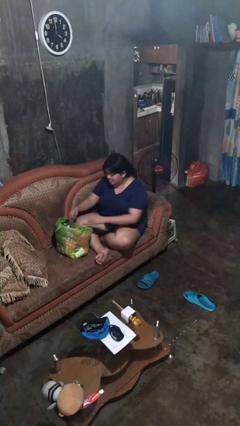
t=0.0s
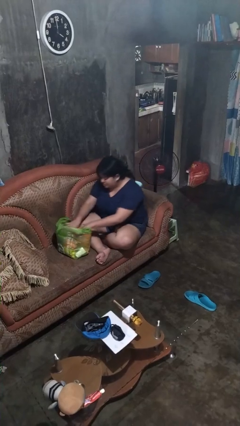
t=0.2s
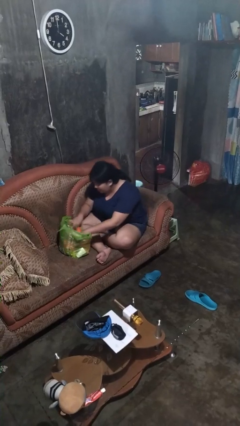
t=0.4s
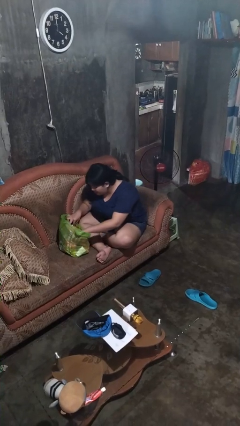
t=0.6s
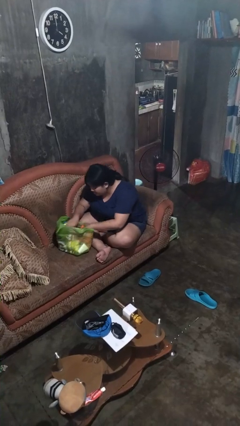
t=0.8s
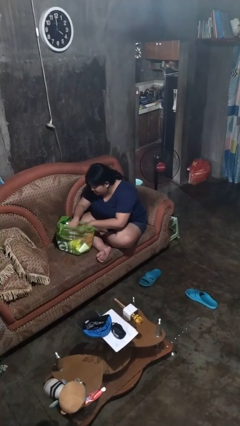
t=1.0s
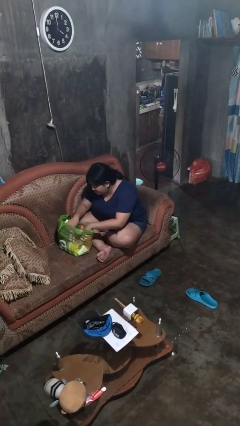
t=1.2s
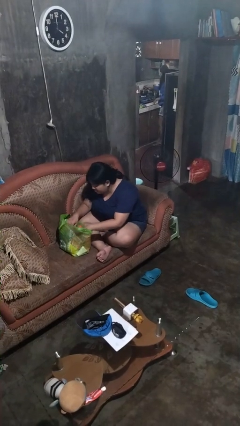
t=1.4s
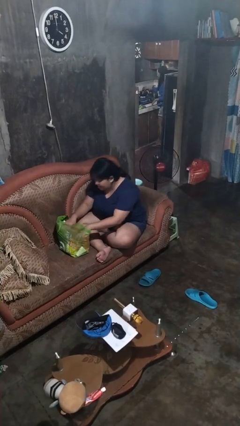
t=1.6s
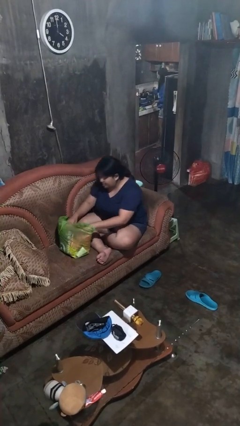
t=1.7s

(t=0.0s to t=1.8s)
person searches in bag

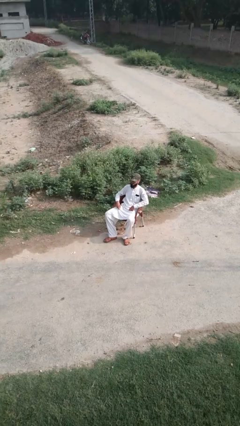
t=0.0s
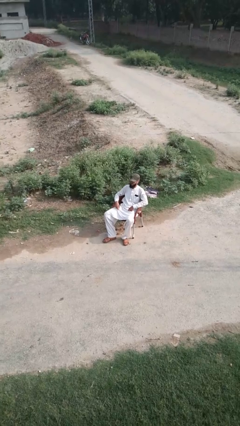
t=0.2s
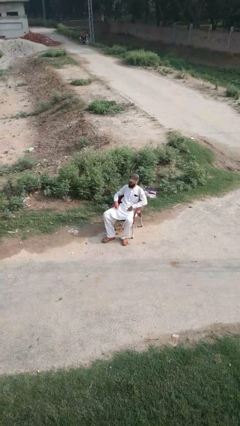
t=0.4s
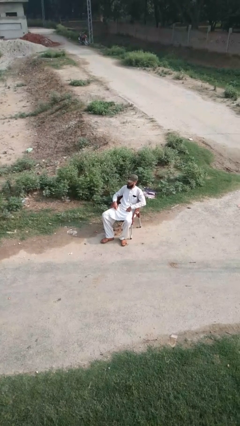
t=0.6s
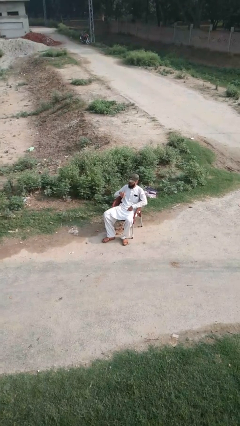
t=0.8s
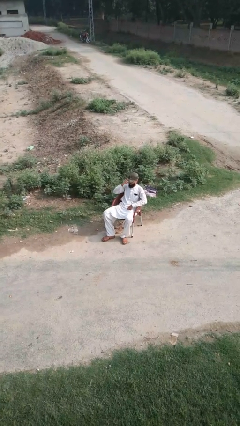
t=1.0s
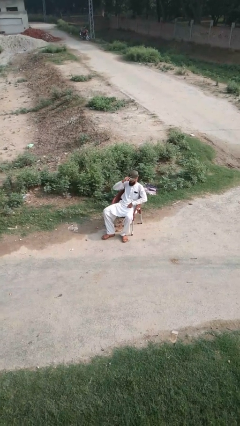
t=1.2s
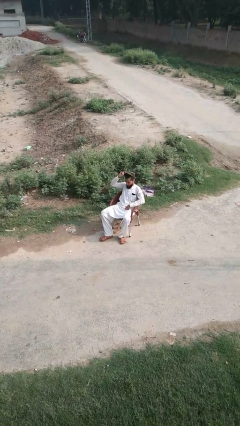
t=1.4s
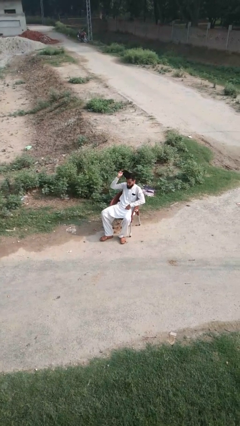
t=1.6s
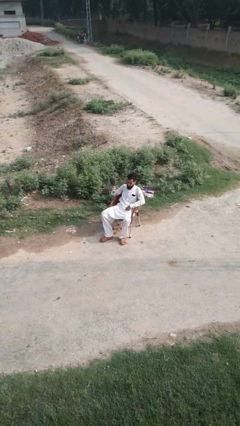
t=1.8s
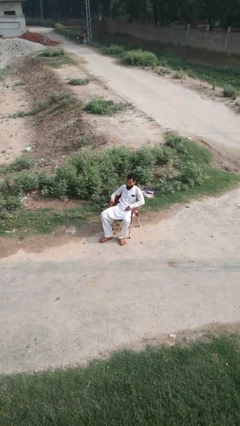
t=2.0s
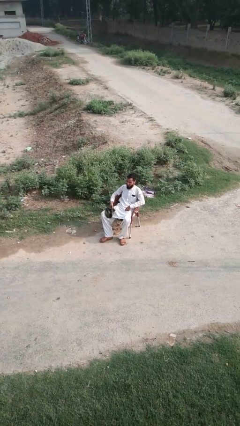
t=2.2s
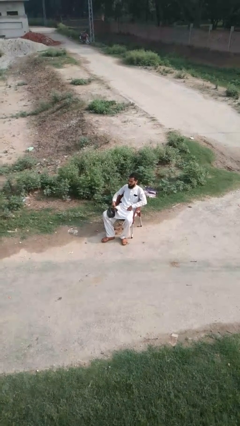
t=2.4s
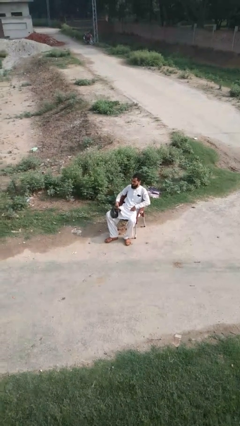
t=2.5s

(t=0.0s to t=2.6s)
person takes off hat

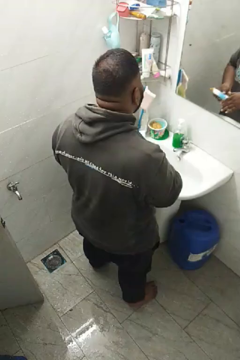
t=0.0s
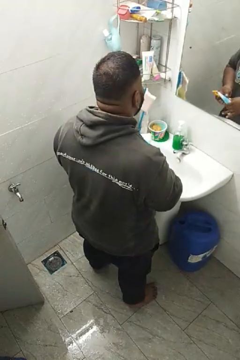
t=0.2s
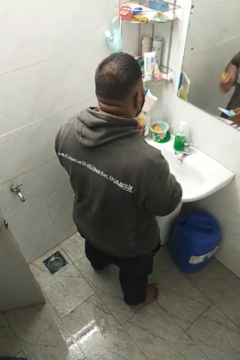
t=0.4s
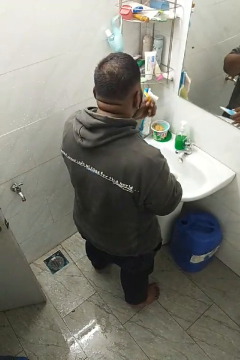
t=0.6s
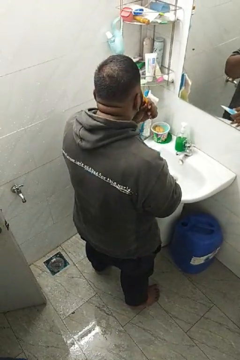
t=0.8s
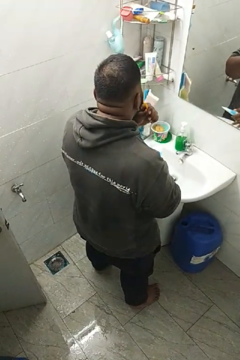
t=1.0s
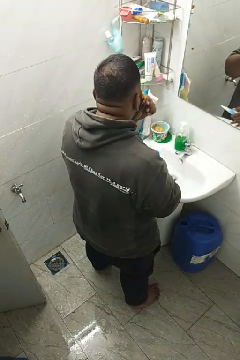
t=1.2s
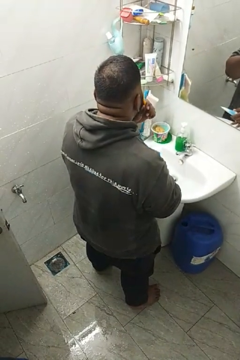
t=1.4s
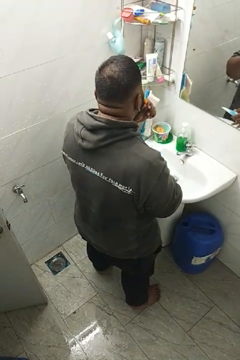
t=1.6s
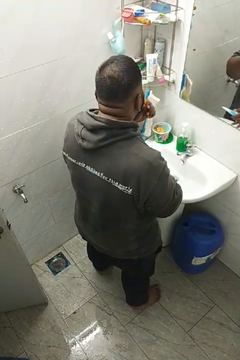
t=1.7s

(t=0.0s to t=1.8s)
person shaves face

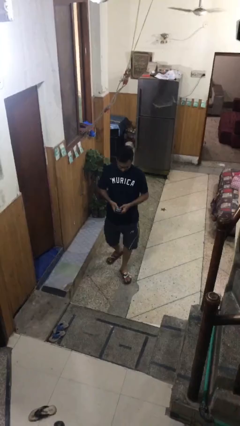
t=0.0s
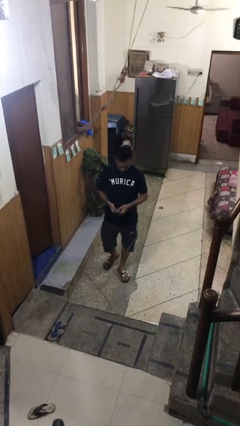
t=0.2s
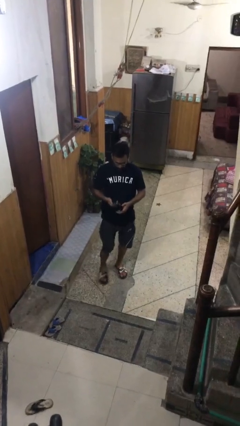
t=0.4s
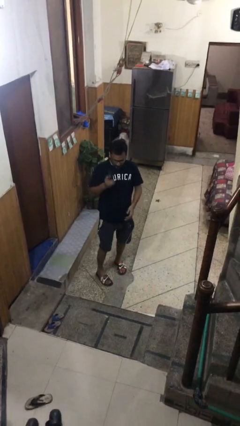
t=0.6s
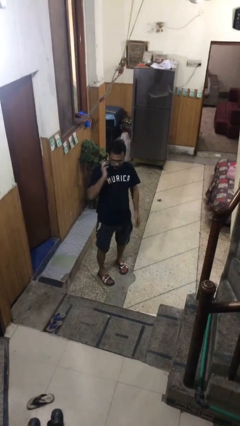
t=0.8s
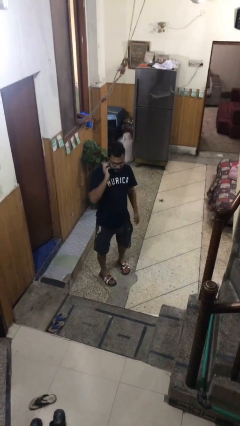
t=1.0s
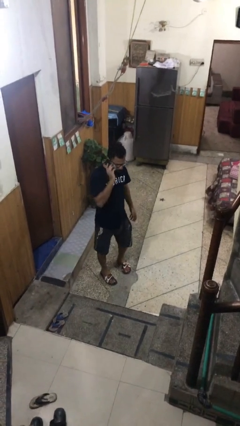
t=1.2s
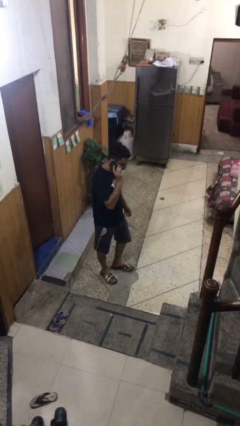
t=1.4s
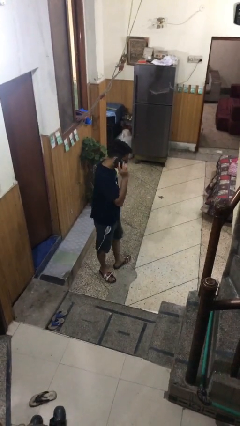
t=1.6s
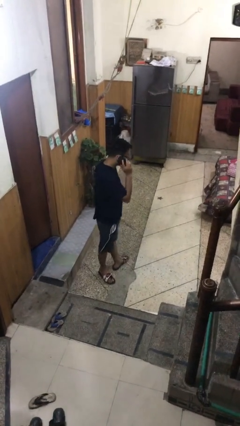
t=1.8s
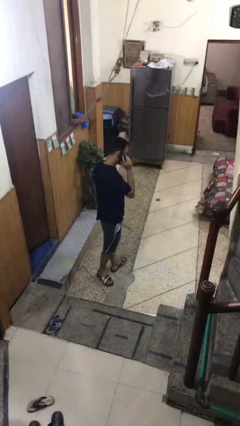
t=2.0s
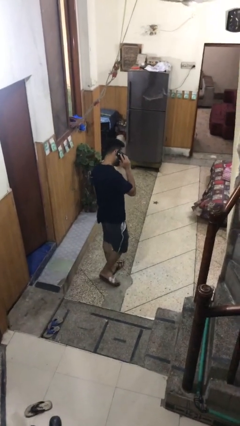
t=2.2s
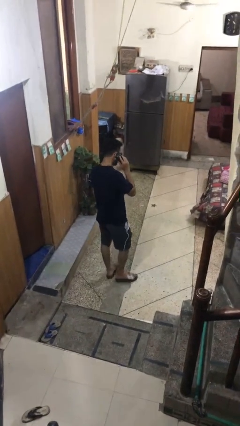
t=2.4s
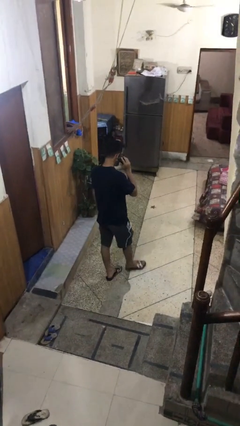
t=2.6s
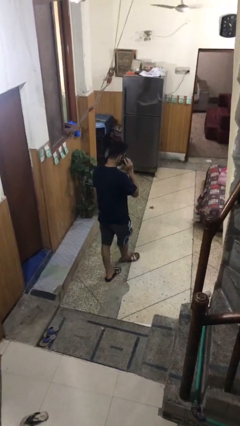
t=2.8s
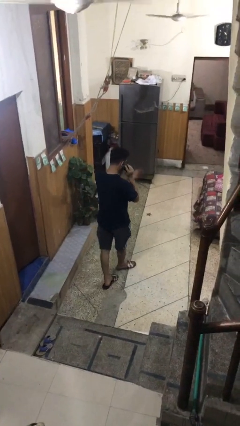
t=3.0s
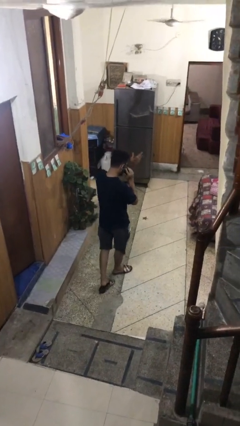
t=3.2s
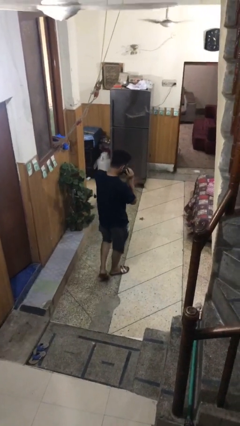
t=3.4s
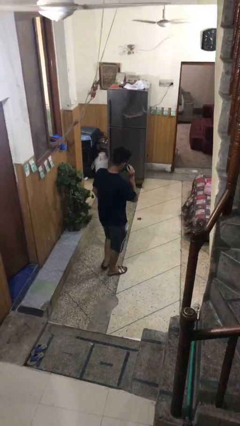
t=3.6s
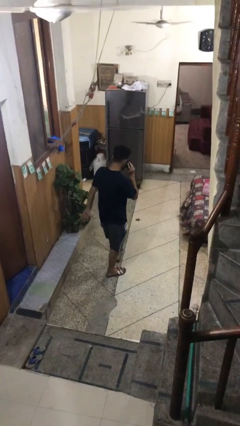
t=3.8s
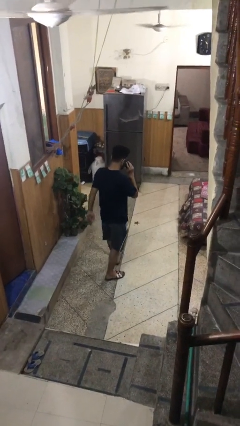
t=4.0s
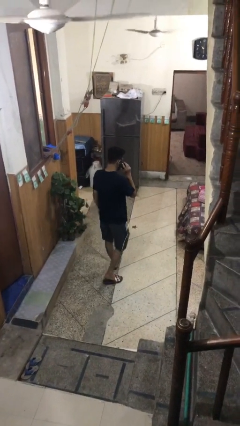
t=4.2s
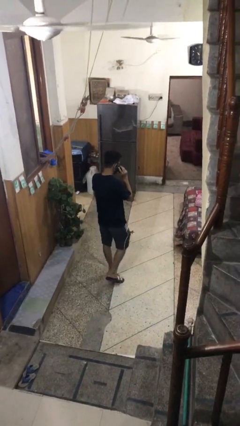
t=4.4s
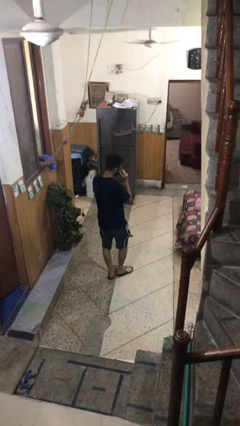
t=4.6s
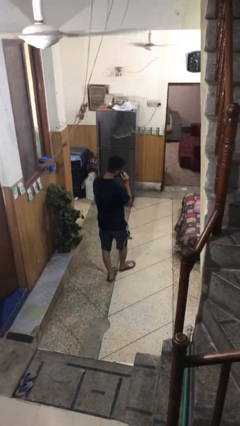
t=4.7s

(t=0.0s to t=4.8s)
person talks on phone

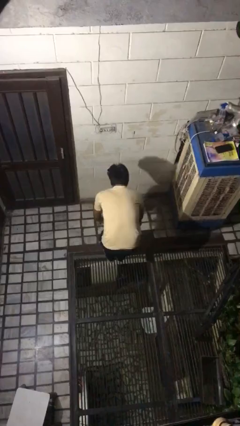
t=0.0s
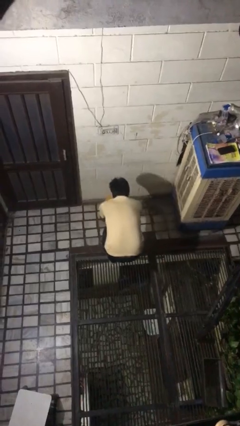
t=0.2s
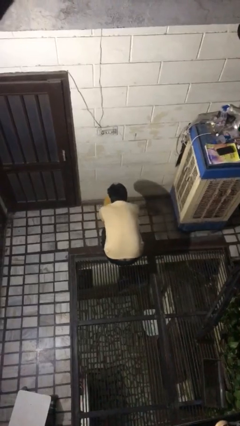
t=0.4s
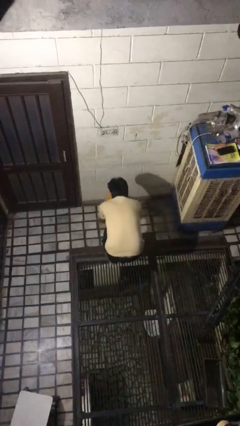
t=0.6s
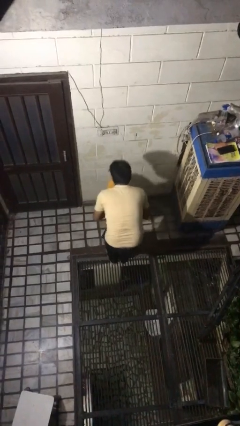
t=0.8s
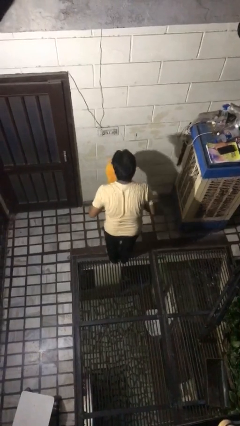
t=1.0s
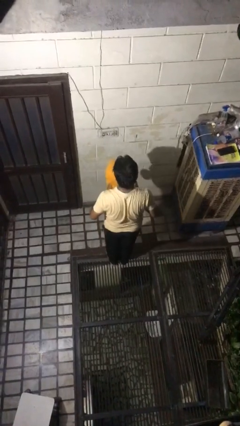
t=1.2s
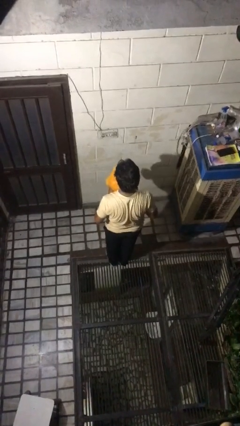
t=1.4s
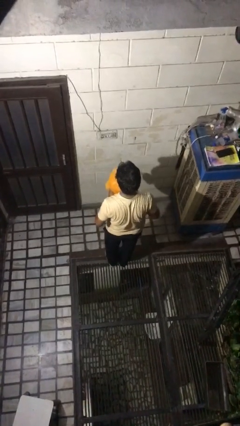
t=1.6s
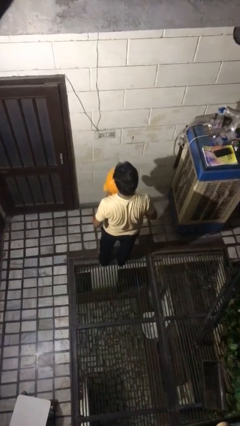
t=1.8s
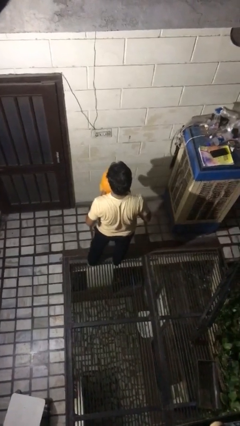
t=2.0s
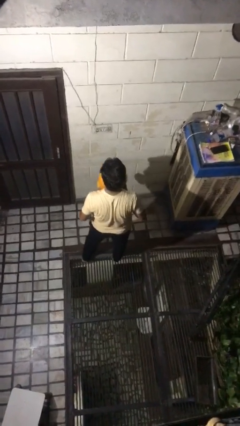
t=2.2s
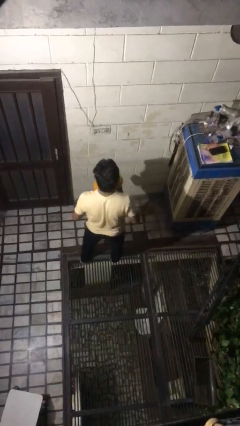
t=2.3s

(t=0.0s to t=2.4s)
person picks up object from floor

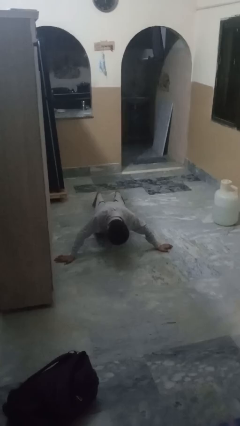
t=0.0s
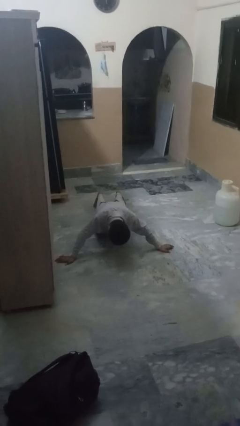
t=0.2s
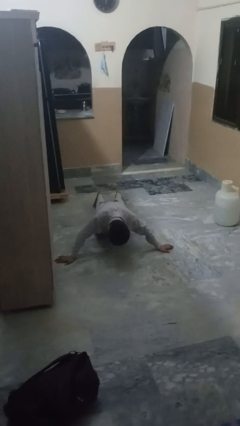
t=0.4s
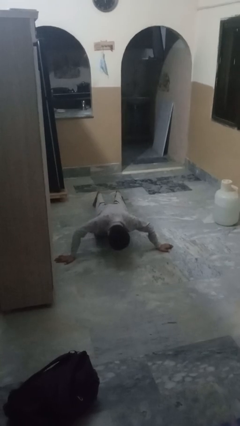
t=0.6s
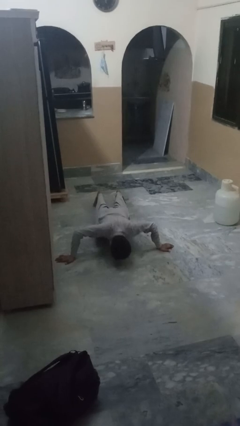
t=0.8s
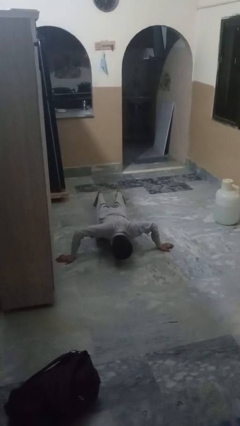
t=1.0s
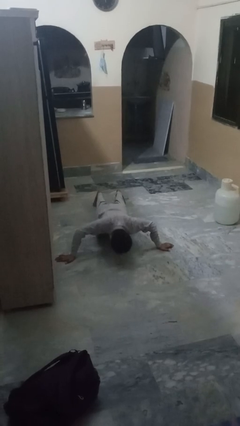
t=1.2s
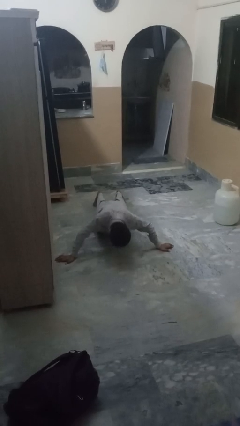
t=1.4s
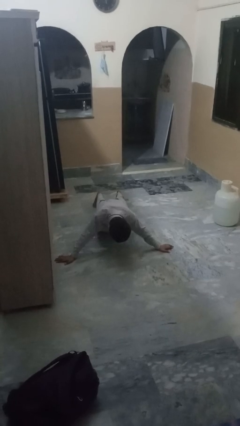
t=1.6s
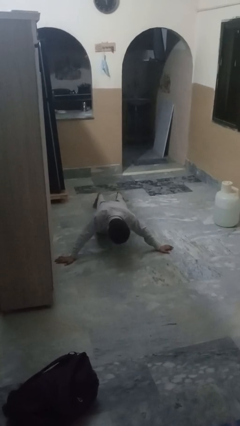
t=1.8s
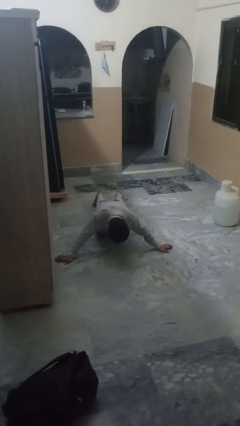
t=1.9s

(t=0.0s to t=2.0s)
person exercises with pushup

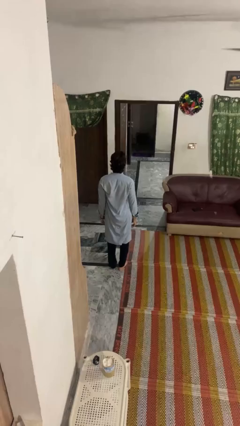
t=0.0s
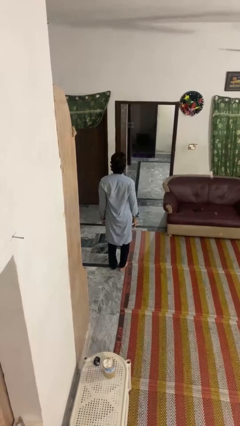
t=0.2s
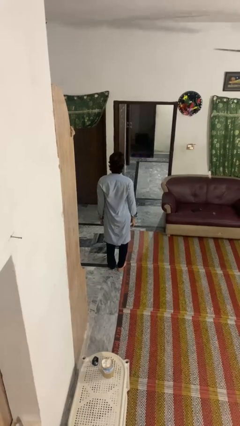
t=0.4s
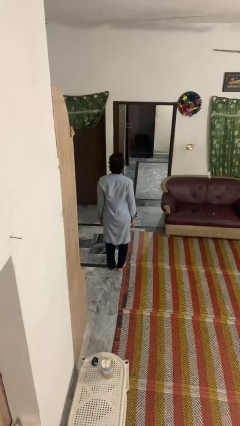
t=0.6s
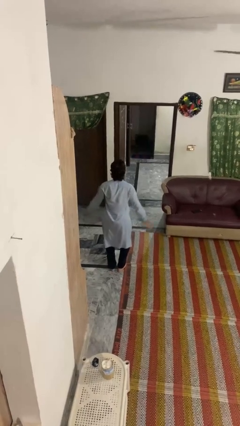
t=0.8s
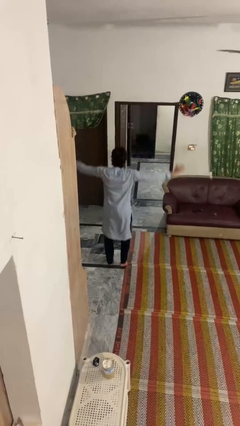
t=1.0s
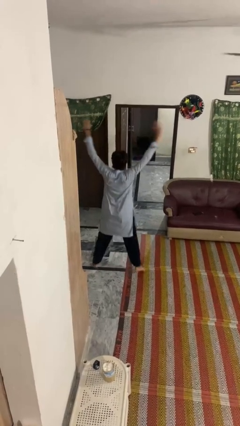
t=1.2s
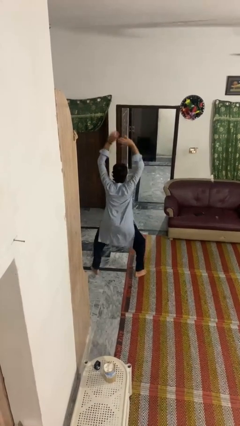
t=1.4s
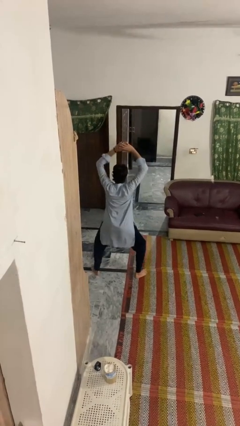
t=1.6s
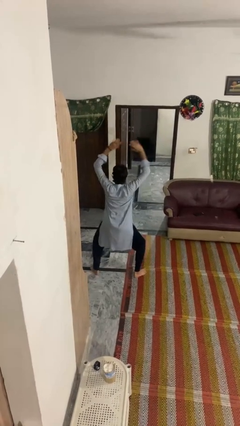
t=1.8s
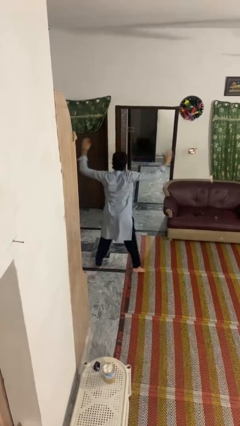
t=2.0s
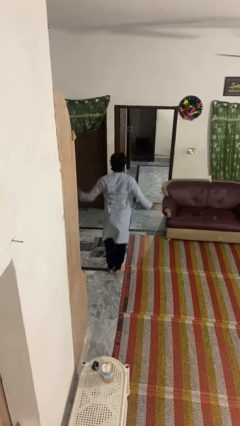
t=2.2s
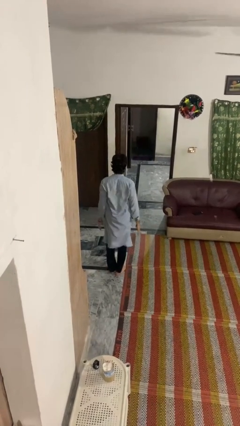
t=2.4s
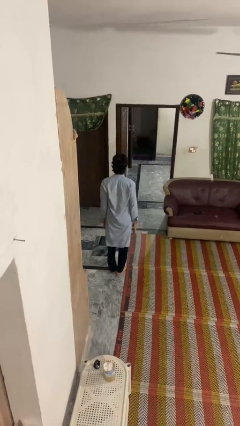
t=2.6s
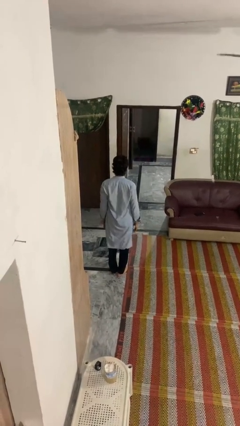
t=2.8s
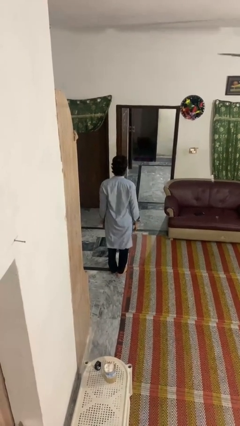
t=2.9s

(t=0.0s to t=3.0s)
person exercises with jumping jacks
